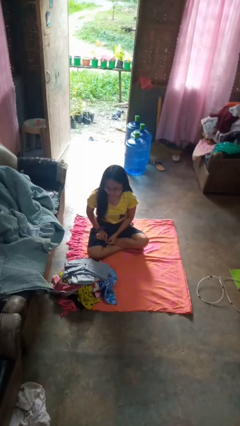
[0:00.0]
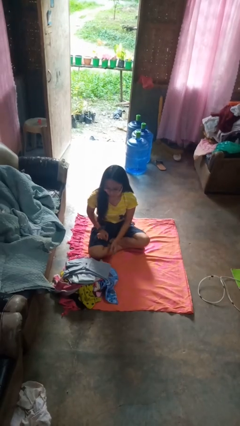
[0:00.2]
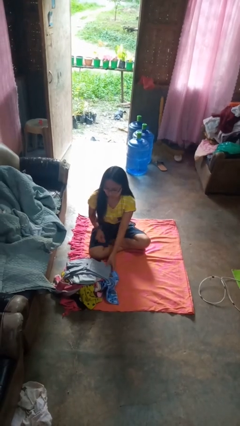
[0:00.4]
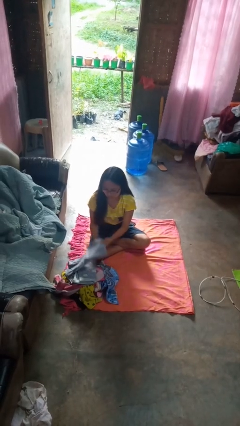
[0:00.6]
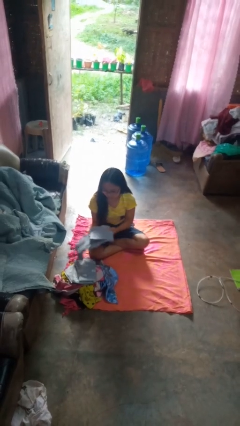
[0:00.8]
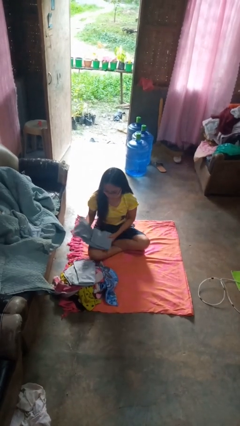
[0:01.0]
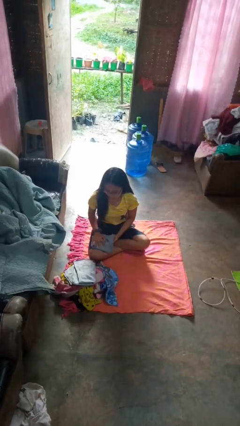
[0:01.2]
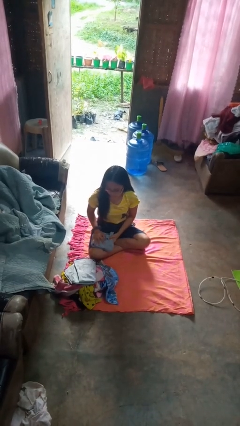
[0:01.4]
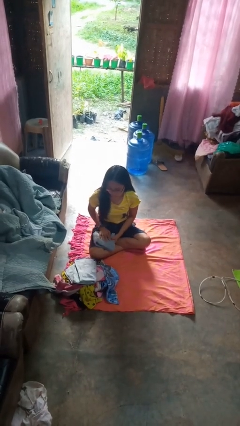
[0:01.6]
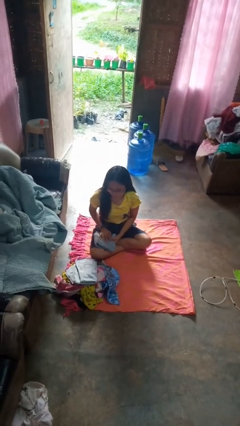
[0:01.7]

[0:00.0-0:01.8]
person folds shirt

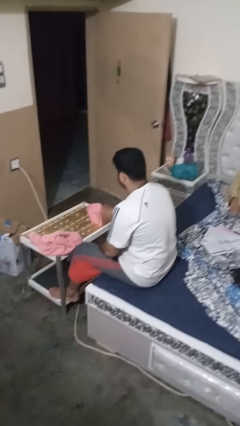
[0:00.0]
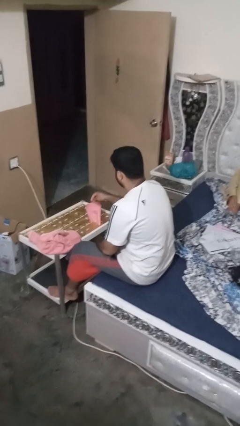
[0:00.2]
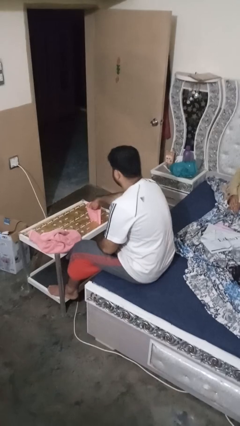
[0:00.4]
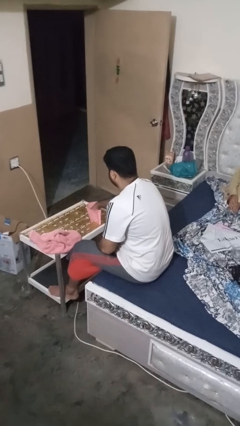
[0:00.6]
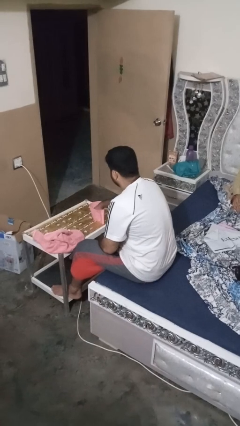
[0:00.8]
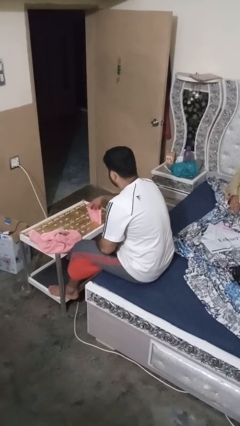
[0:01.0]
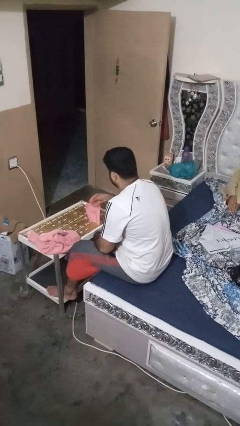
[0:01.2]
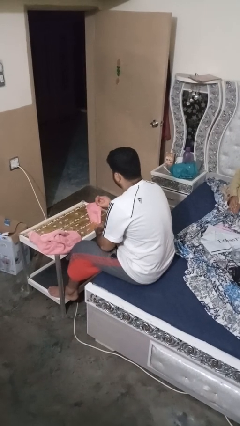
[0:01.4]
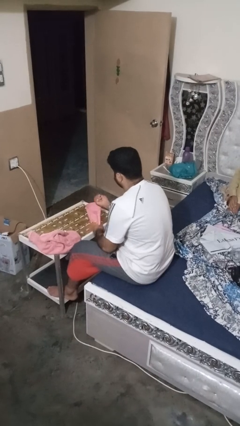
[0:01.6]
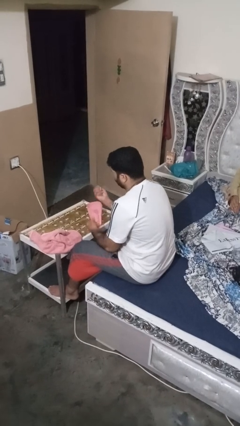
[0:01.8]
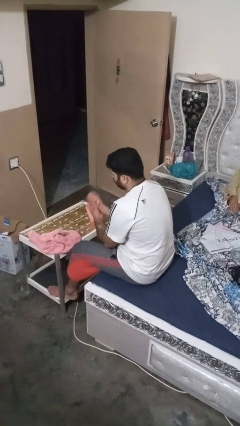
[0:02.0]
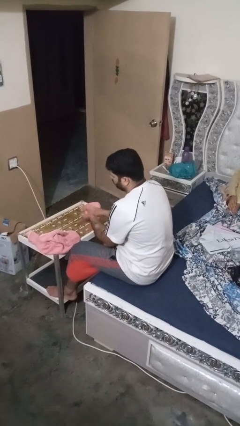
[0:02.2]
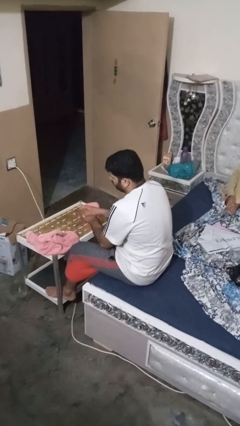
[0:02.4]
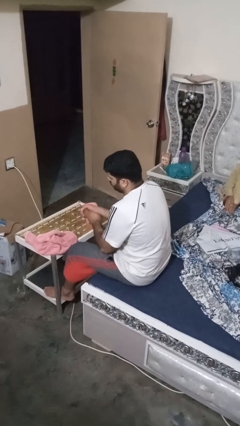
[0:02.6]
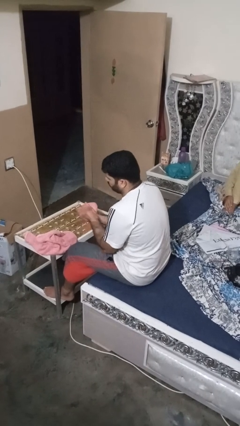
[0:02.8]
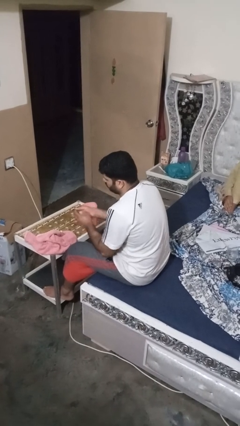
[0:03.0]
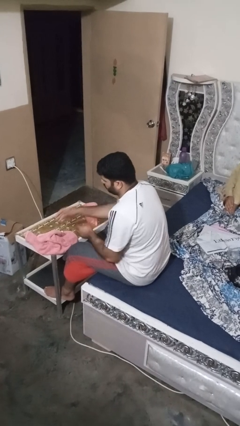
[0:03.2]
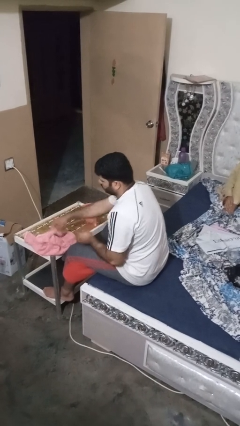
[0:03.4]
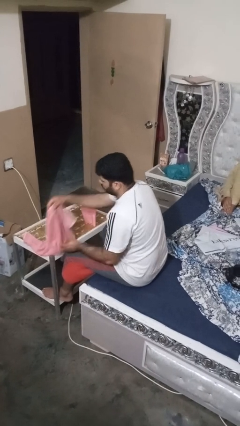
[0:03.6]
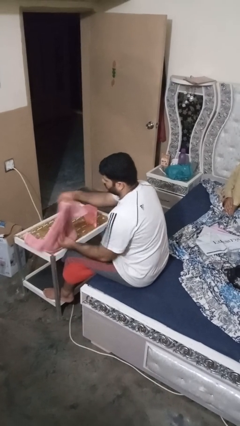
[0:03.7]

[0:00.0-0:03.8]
person washes hands

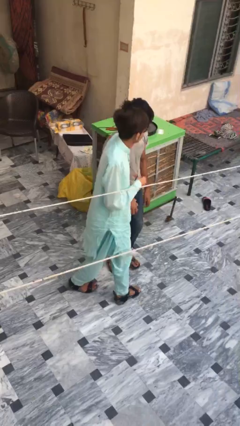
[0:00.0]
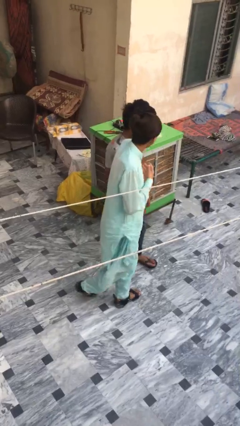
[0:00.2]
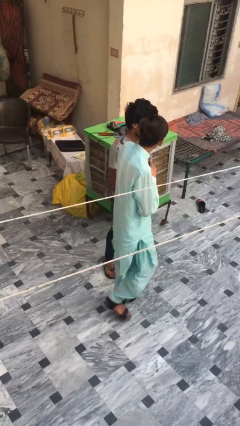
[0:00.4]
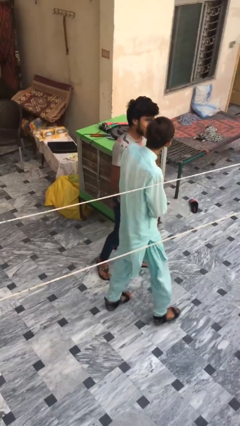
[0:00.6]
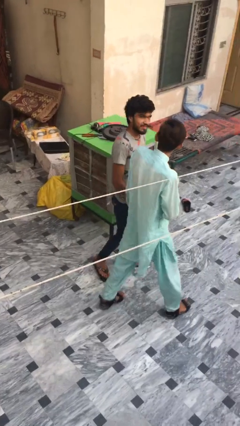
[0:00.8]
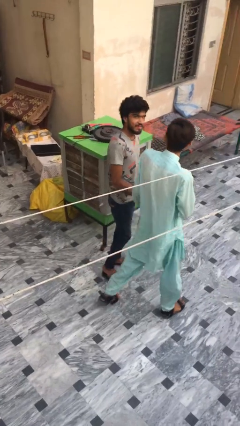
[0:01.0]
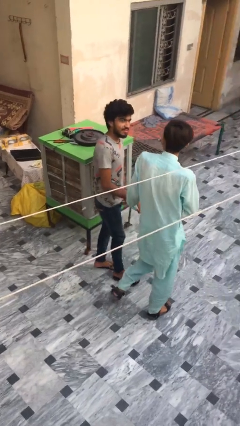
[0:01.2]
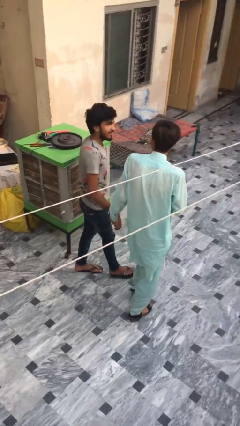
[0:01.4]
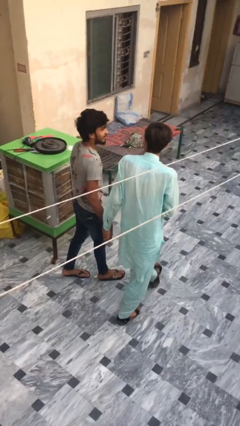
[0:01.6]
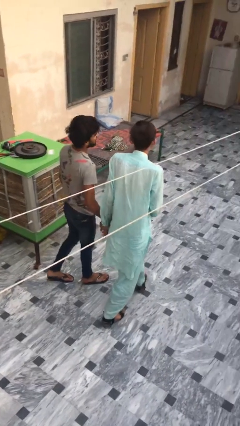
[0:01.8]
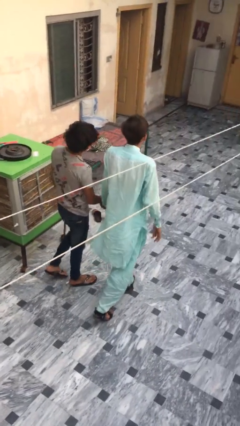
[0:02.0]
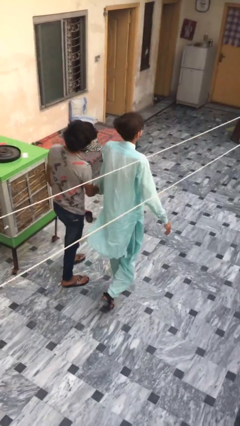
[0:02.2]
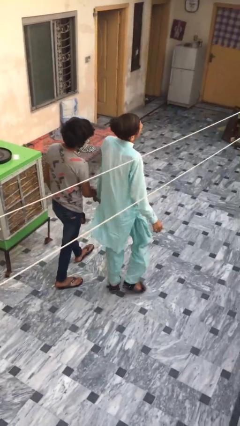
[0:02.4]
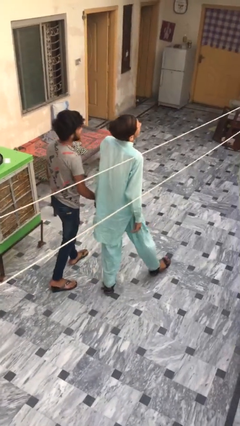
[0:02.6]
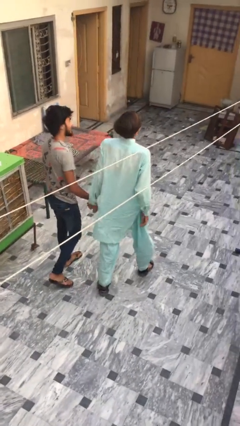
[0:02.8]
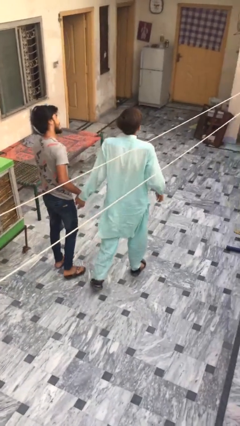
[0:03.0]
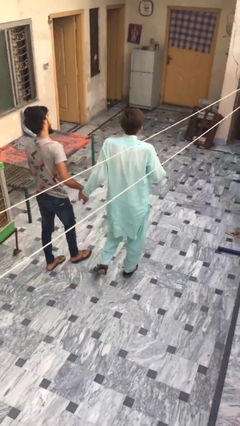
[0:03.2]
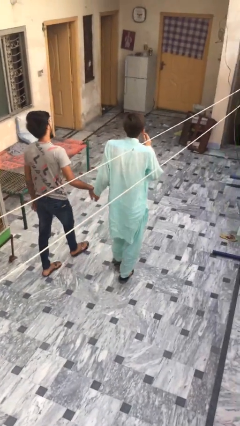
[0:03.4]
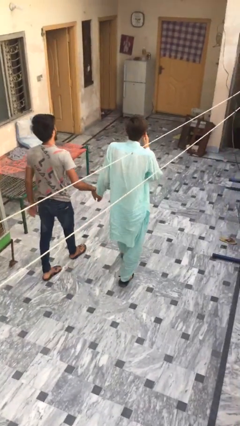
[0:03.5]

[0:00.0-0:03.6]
person talks to person

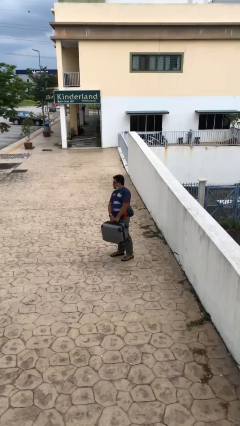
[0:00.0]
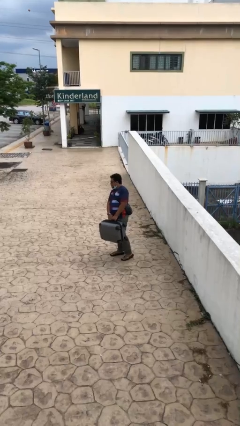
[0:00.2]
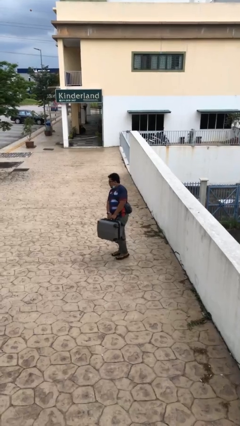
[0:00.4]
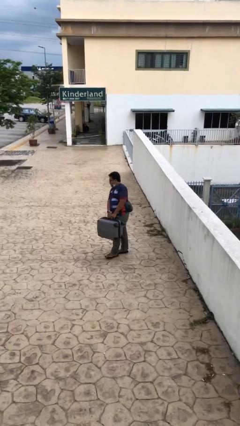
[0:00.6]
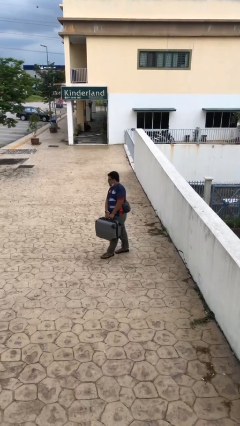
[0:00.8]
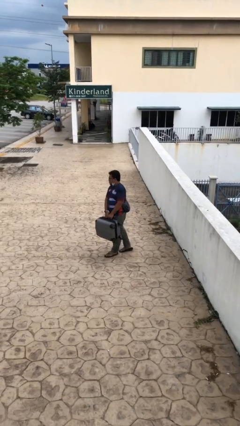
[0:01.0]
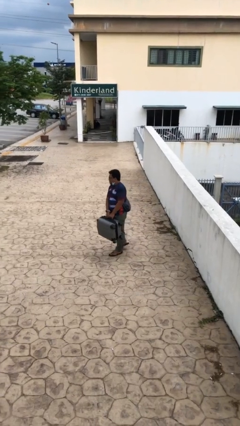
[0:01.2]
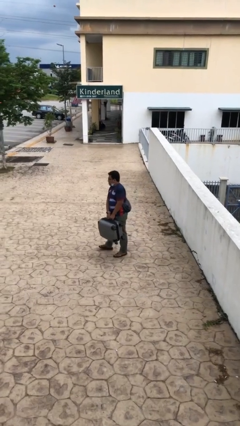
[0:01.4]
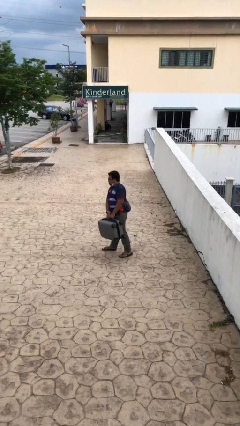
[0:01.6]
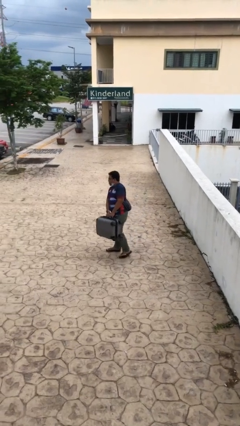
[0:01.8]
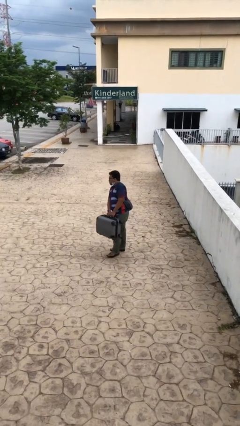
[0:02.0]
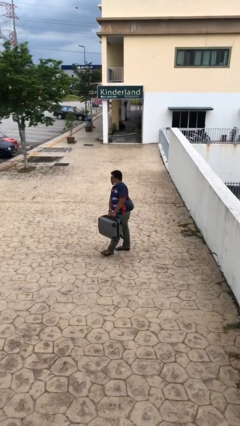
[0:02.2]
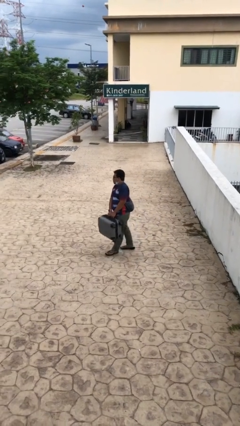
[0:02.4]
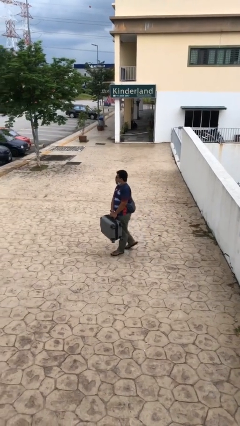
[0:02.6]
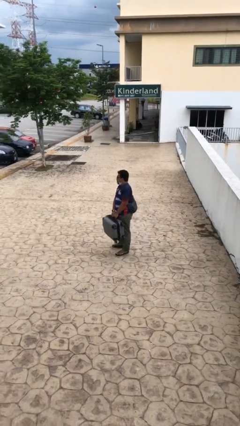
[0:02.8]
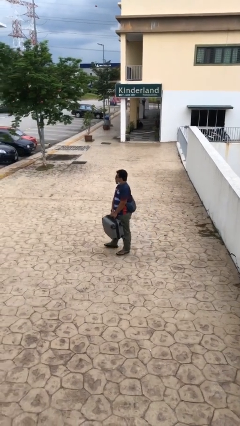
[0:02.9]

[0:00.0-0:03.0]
person carries heavy object

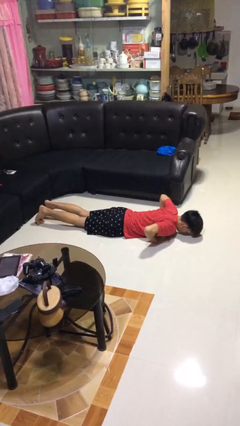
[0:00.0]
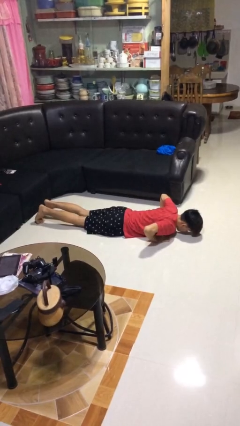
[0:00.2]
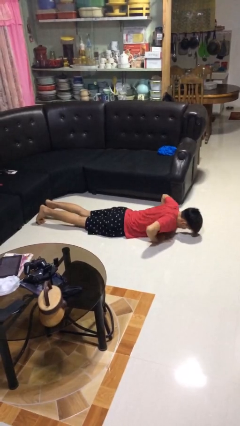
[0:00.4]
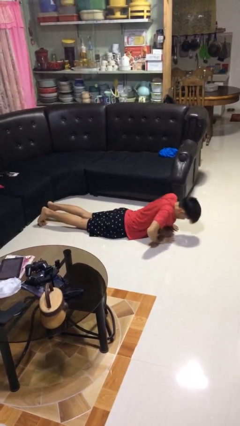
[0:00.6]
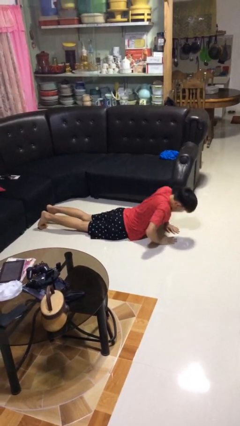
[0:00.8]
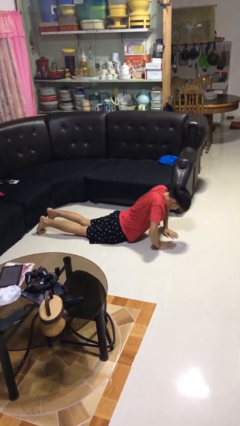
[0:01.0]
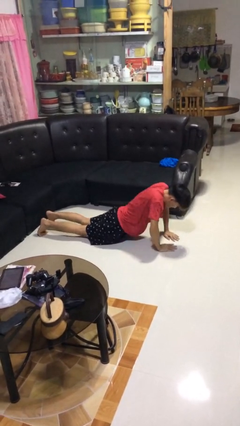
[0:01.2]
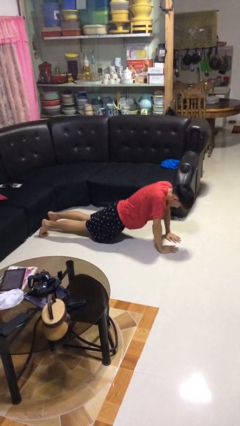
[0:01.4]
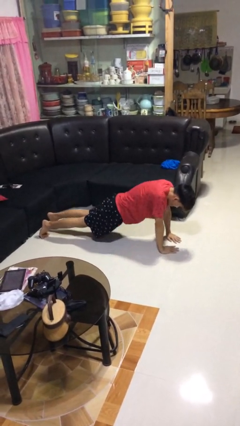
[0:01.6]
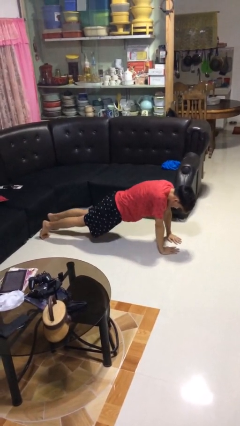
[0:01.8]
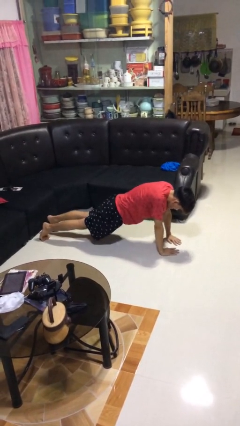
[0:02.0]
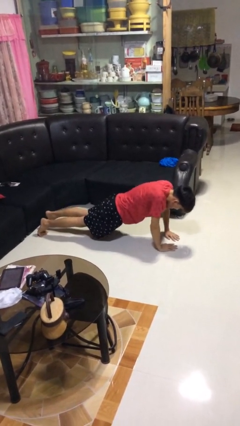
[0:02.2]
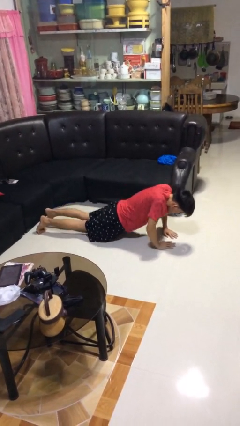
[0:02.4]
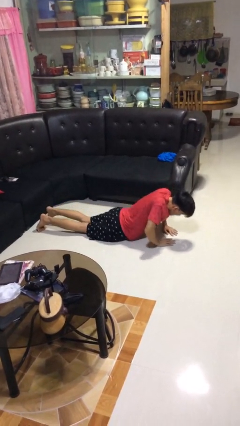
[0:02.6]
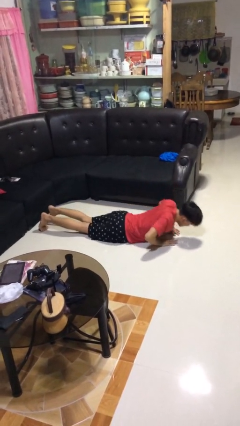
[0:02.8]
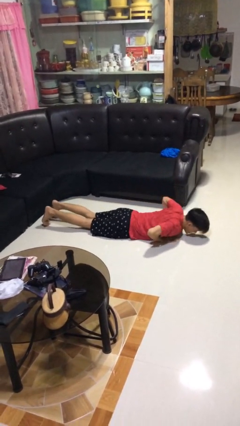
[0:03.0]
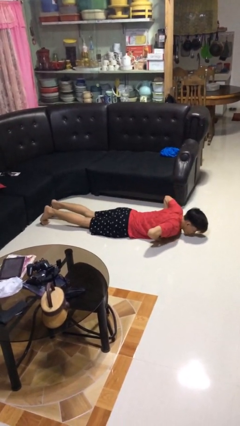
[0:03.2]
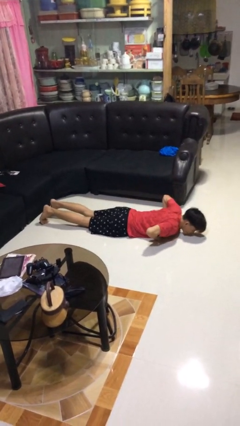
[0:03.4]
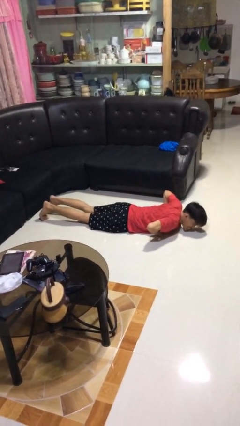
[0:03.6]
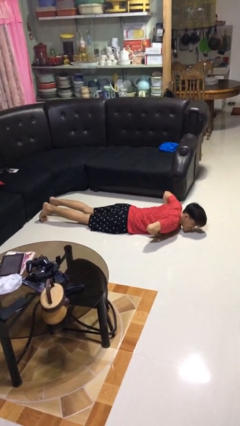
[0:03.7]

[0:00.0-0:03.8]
person exercises with pushup

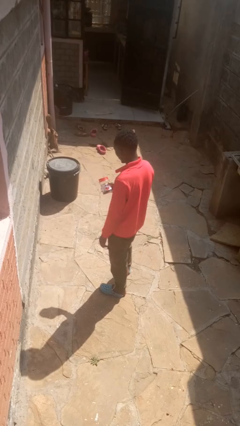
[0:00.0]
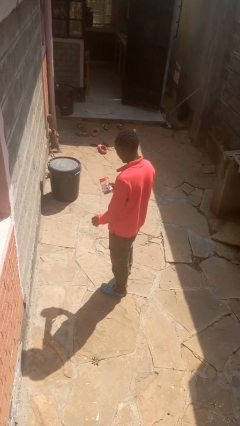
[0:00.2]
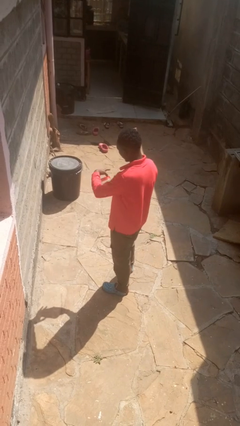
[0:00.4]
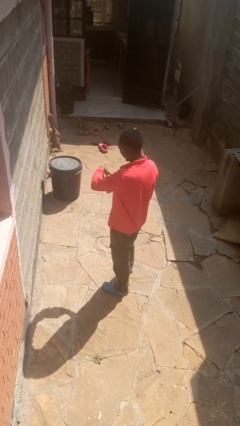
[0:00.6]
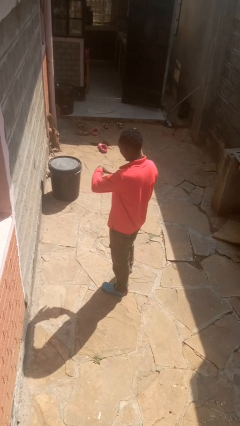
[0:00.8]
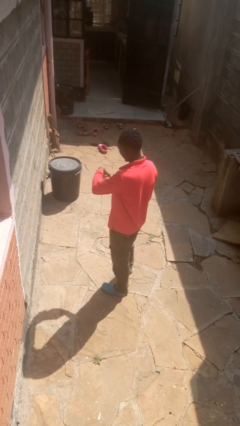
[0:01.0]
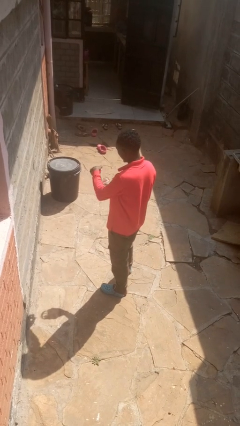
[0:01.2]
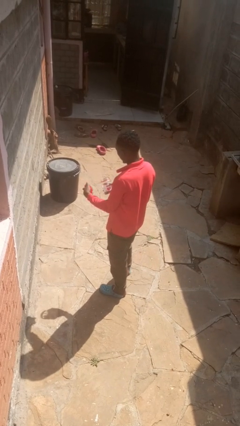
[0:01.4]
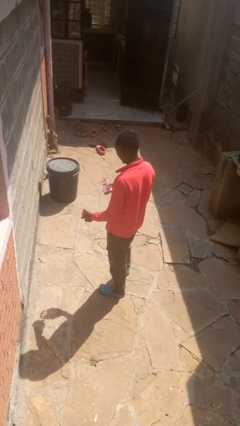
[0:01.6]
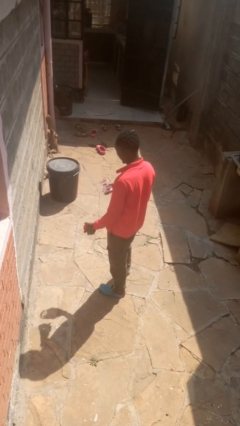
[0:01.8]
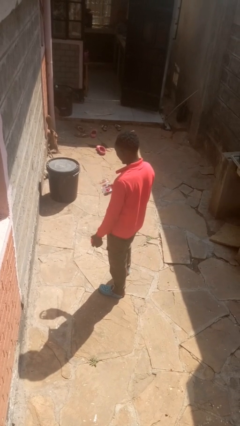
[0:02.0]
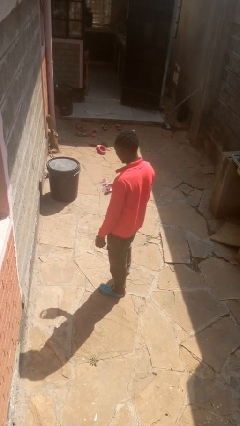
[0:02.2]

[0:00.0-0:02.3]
person opens jar
